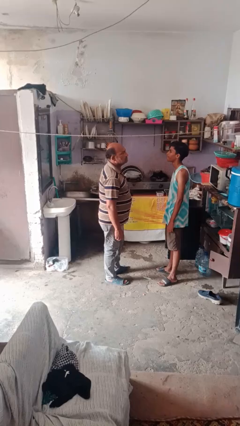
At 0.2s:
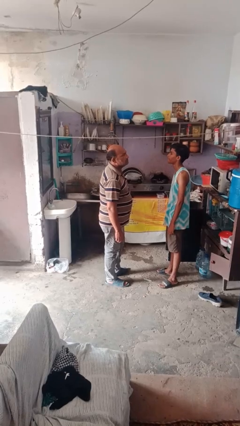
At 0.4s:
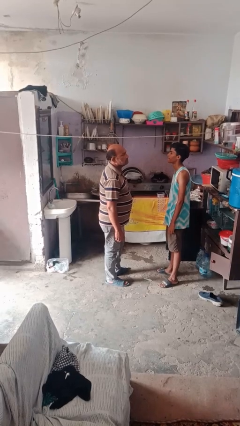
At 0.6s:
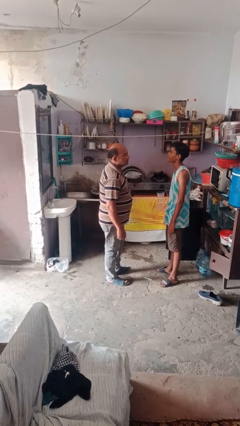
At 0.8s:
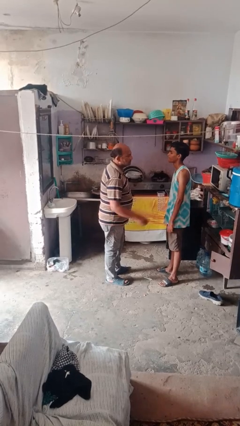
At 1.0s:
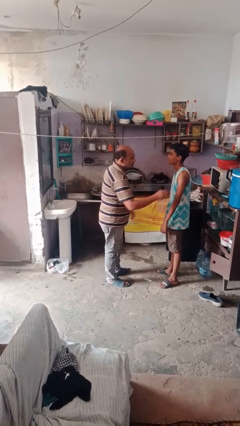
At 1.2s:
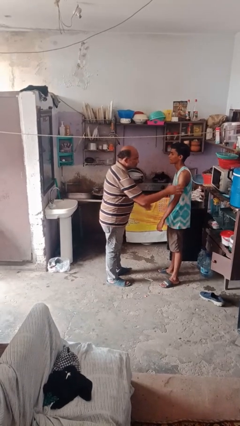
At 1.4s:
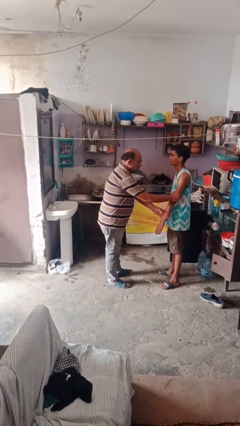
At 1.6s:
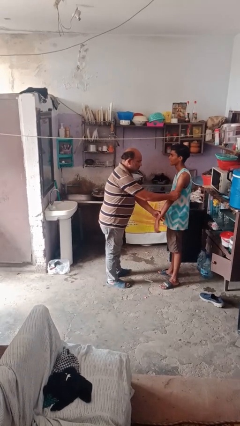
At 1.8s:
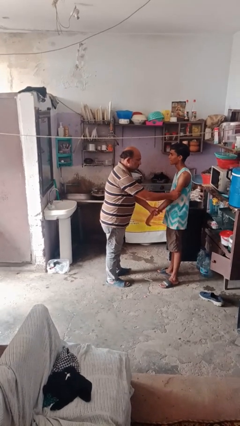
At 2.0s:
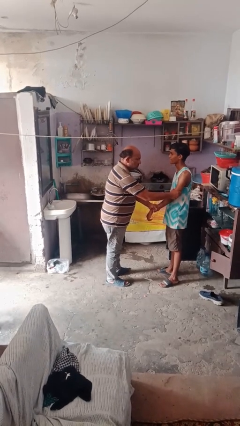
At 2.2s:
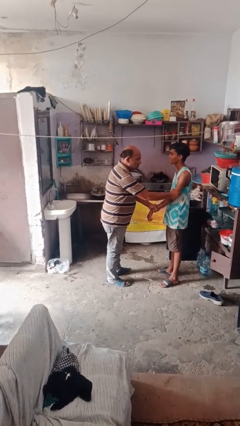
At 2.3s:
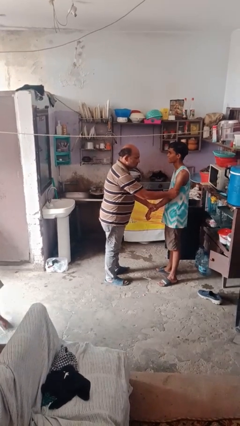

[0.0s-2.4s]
person grabs person by forearm

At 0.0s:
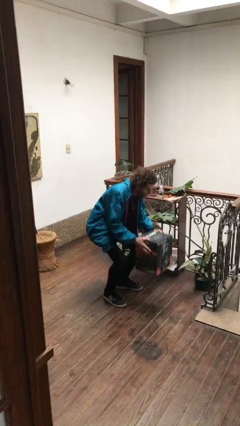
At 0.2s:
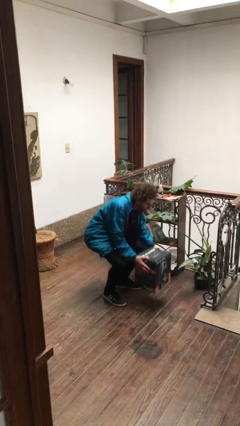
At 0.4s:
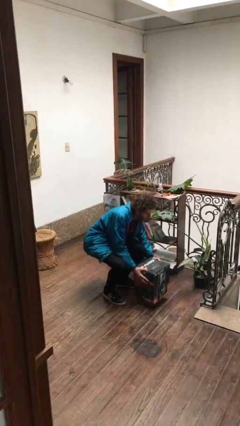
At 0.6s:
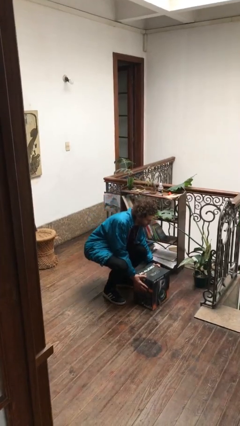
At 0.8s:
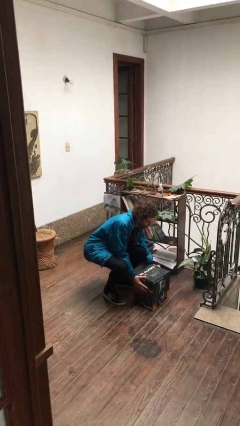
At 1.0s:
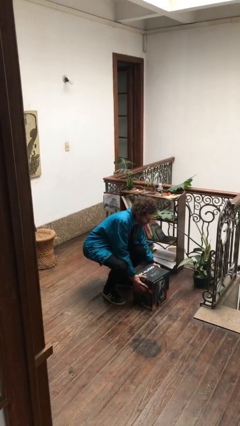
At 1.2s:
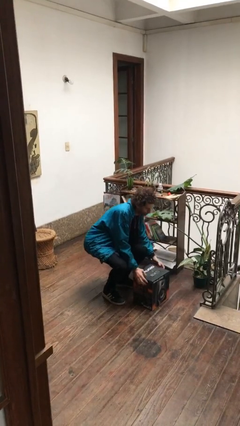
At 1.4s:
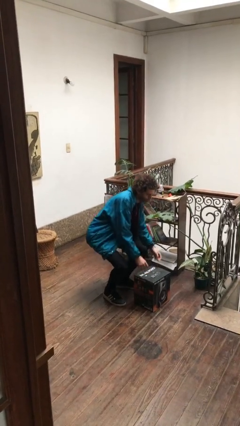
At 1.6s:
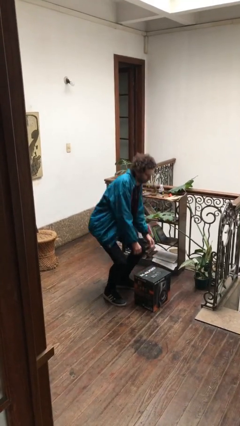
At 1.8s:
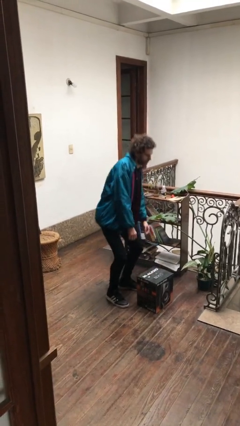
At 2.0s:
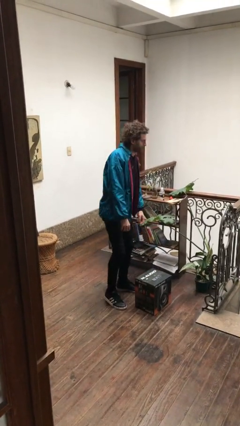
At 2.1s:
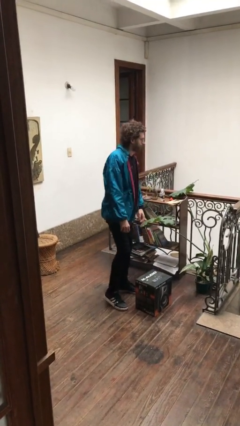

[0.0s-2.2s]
person puts down object on floor

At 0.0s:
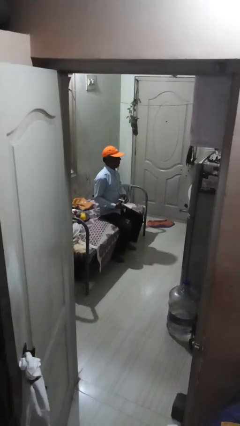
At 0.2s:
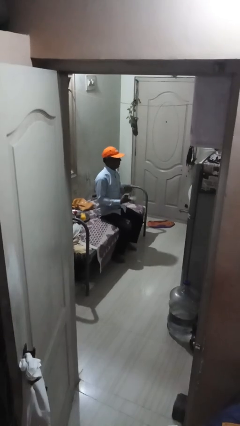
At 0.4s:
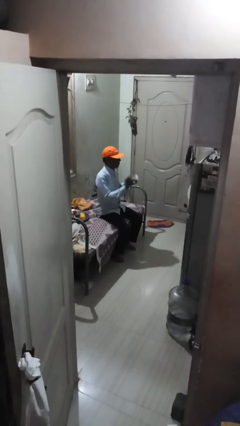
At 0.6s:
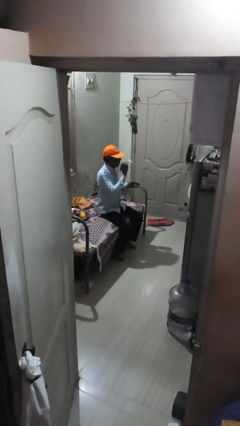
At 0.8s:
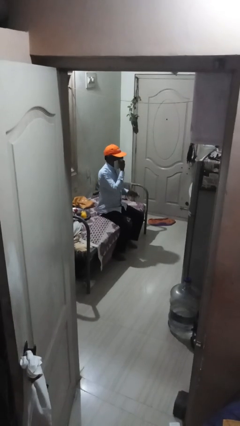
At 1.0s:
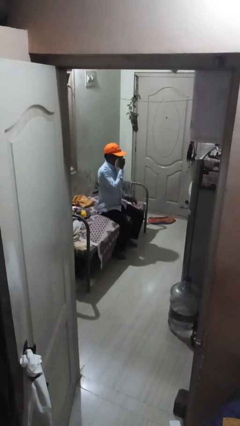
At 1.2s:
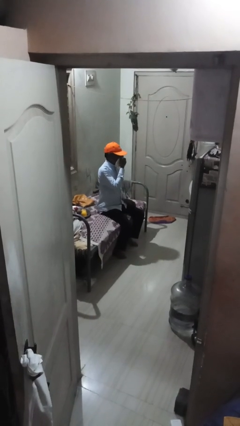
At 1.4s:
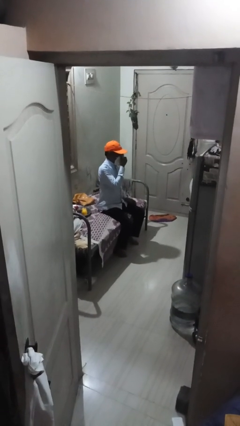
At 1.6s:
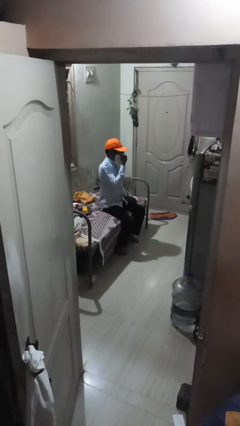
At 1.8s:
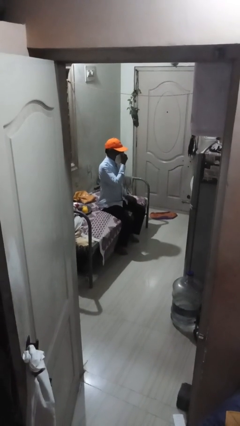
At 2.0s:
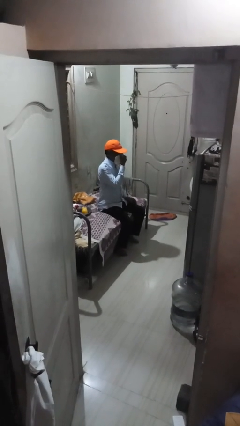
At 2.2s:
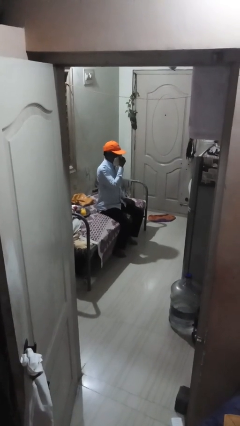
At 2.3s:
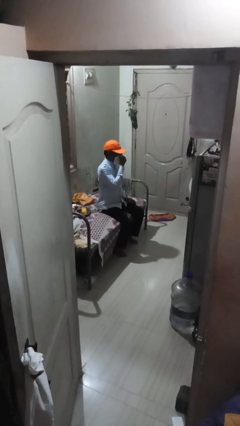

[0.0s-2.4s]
person blows nose

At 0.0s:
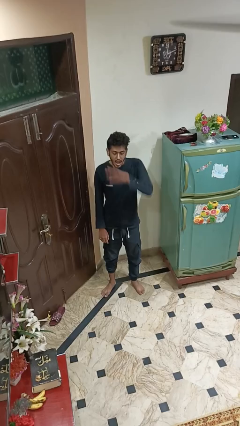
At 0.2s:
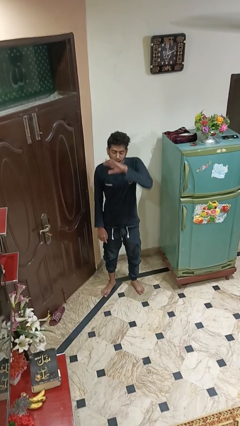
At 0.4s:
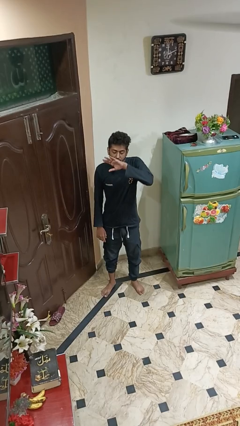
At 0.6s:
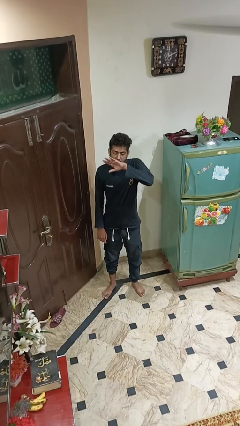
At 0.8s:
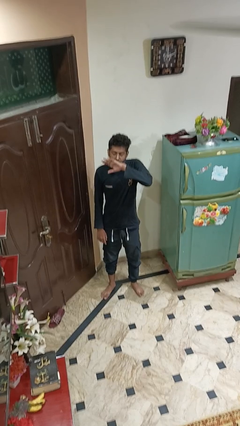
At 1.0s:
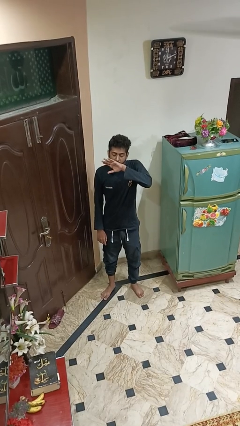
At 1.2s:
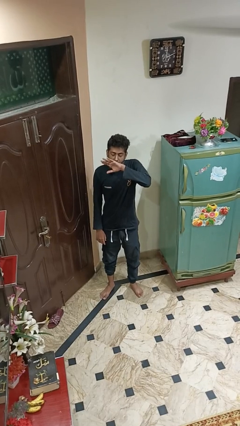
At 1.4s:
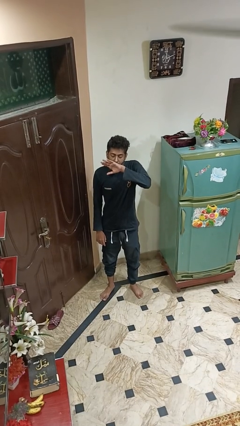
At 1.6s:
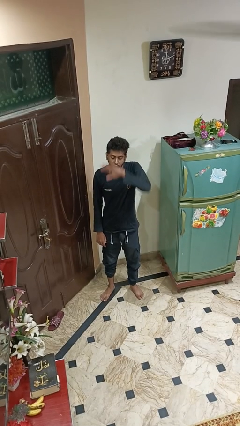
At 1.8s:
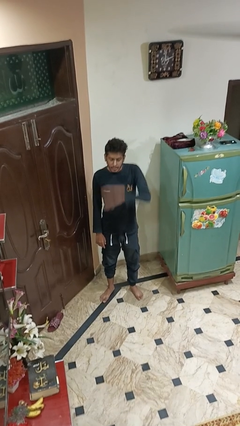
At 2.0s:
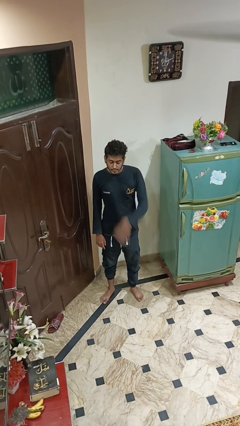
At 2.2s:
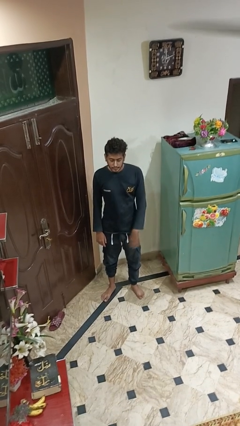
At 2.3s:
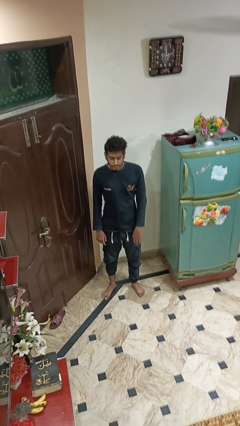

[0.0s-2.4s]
person yawns

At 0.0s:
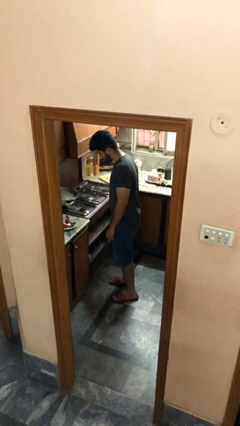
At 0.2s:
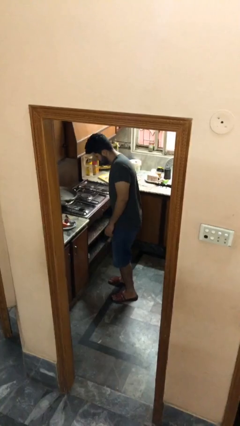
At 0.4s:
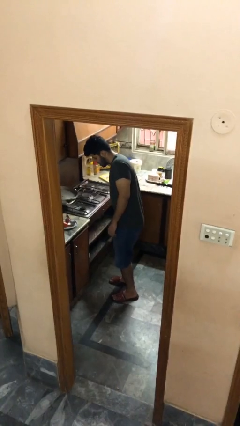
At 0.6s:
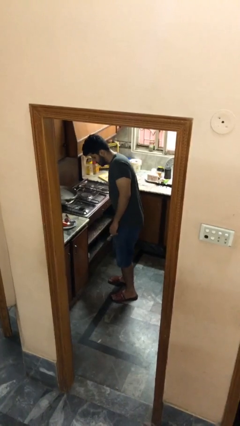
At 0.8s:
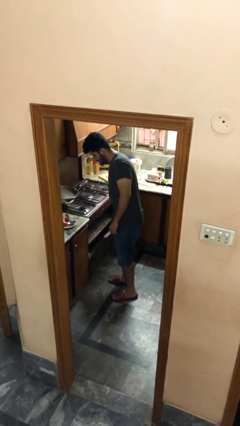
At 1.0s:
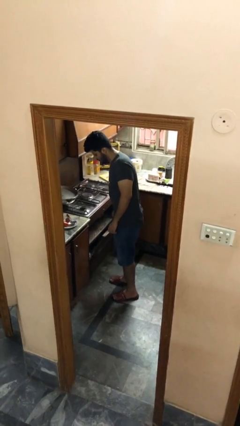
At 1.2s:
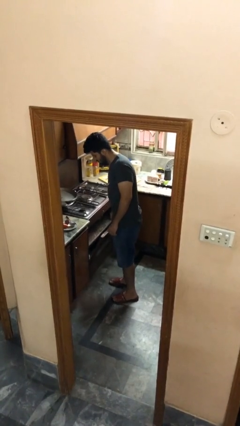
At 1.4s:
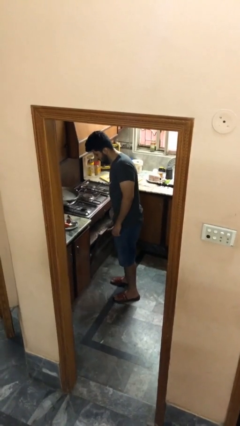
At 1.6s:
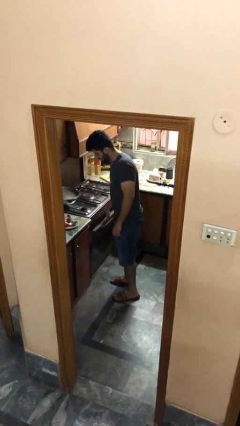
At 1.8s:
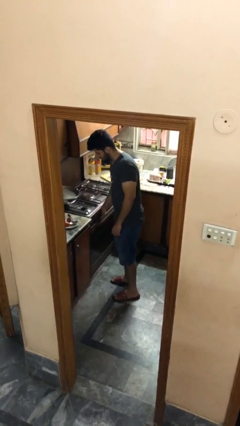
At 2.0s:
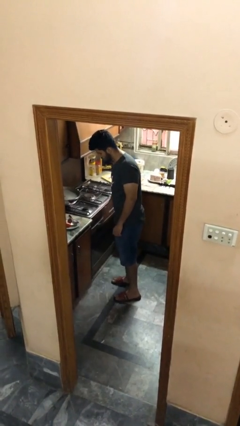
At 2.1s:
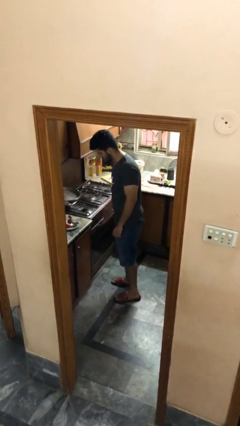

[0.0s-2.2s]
person closes oven door

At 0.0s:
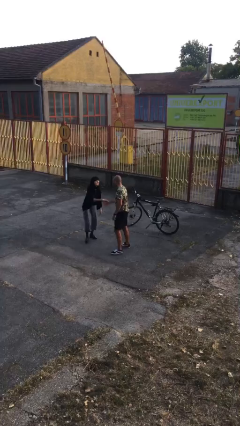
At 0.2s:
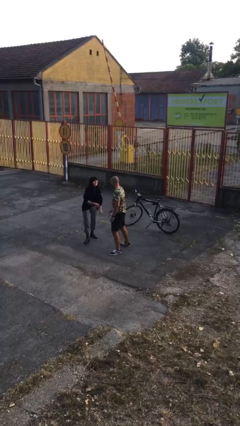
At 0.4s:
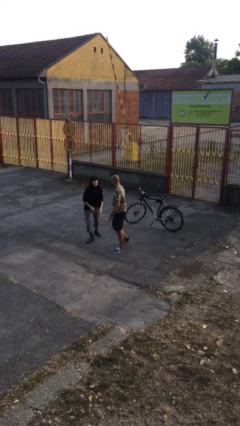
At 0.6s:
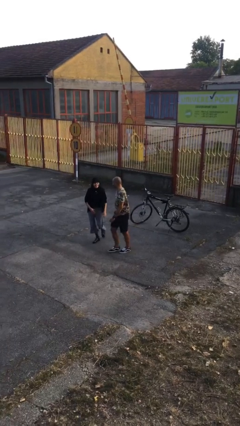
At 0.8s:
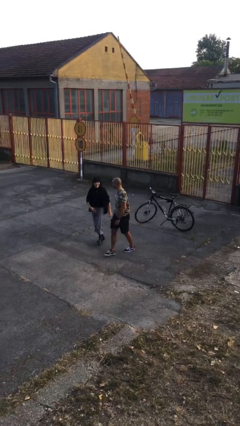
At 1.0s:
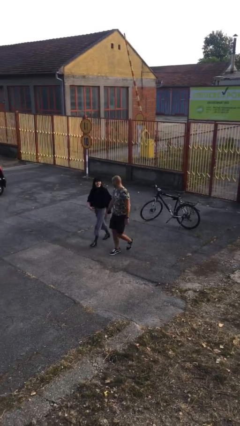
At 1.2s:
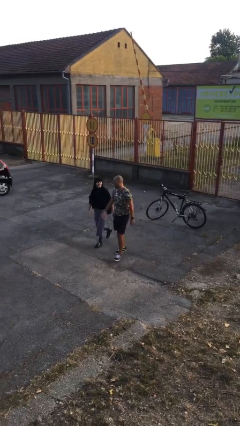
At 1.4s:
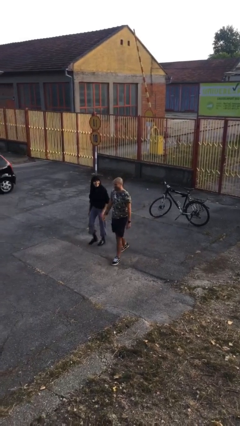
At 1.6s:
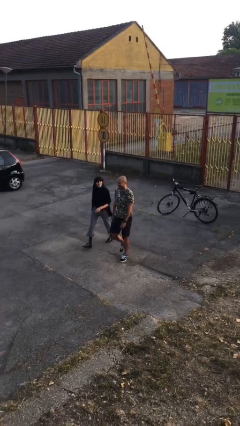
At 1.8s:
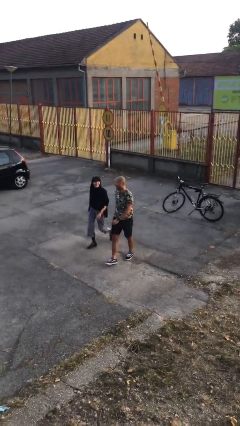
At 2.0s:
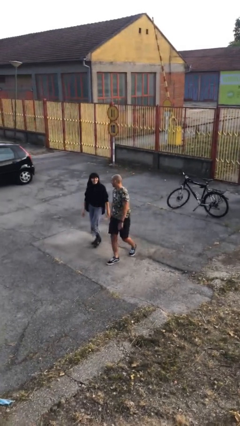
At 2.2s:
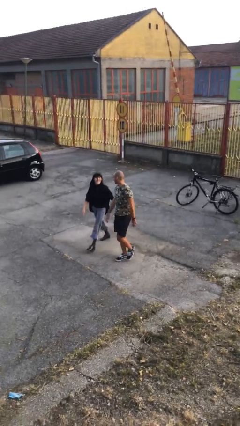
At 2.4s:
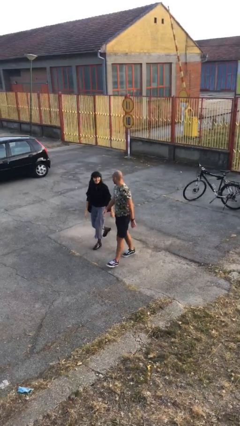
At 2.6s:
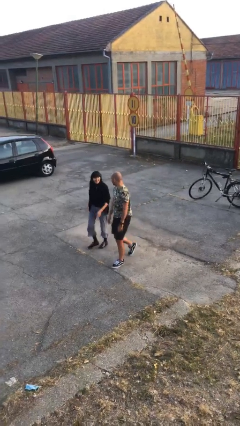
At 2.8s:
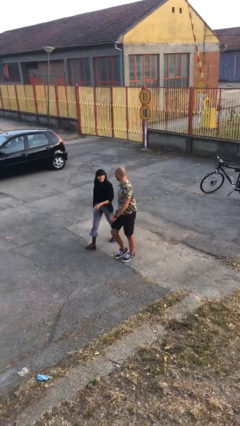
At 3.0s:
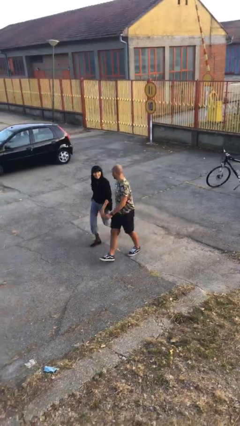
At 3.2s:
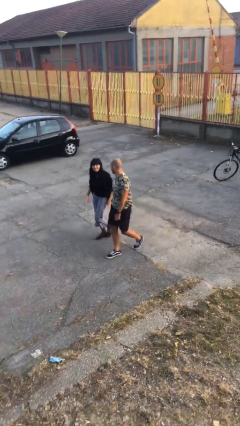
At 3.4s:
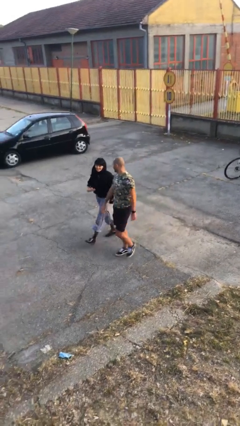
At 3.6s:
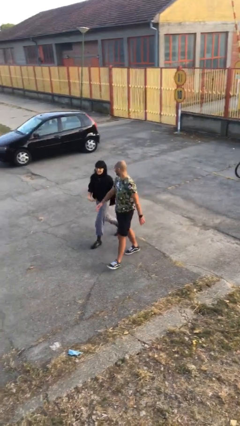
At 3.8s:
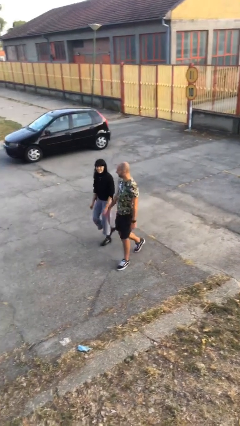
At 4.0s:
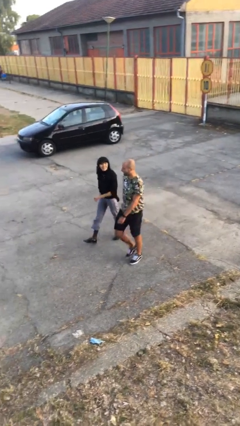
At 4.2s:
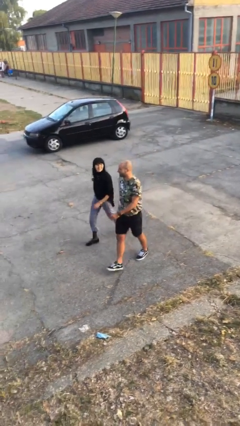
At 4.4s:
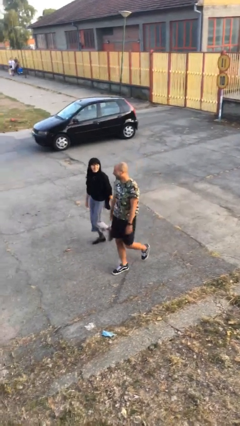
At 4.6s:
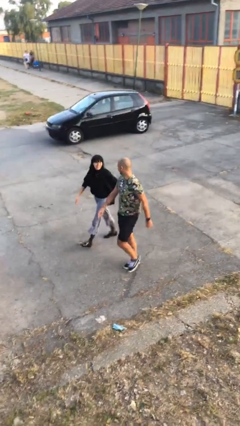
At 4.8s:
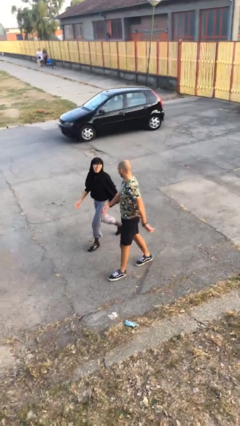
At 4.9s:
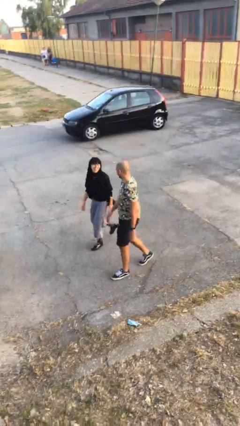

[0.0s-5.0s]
person talks to person

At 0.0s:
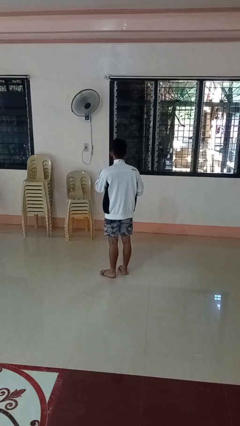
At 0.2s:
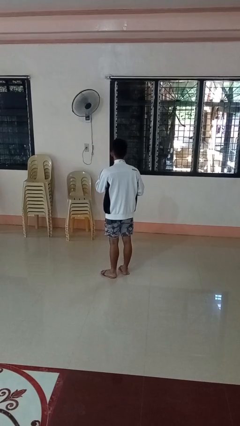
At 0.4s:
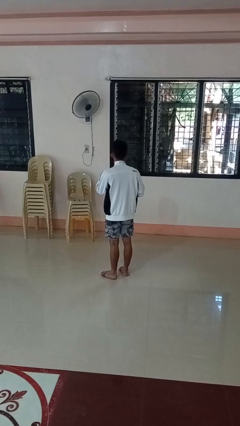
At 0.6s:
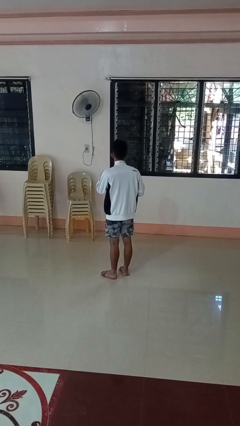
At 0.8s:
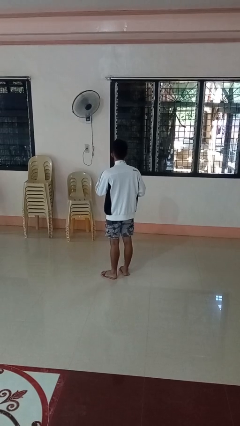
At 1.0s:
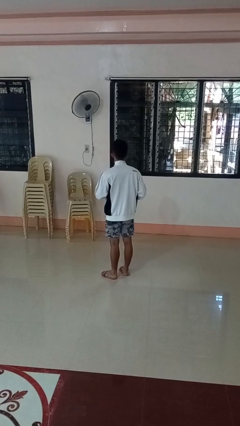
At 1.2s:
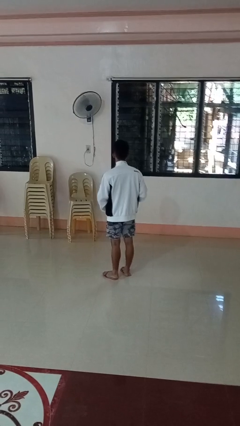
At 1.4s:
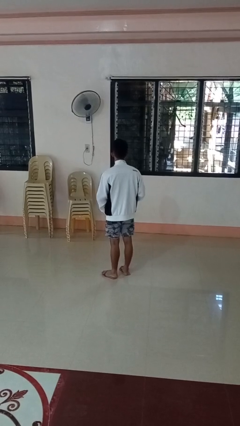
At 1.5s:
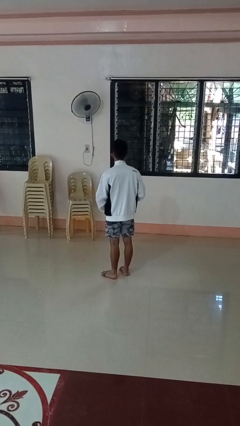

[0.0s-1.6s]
person zips up jacket
